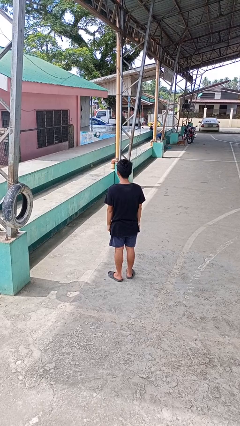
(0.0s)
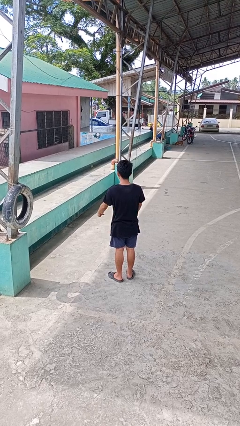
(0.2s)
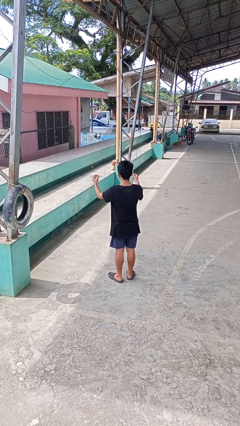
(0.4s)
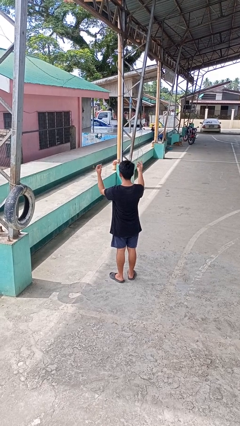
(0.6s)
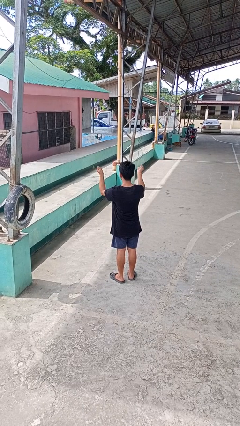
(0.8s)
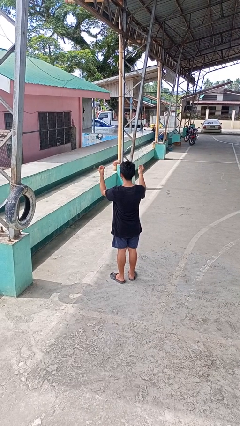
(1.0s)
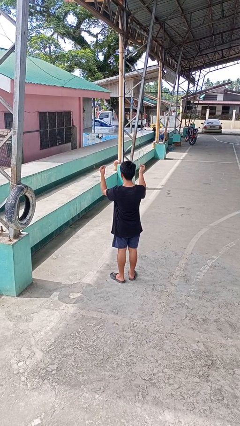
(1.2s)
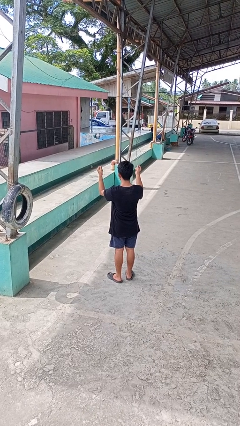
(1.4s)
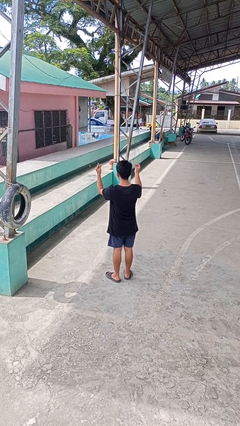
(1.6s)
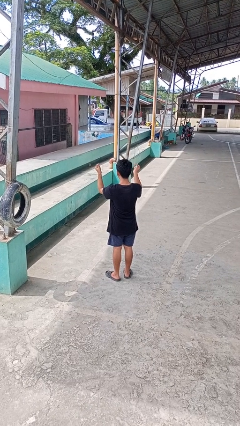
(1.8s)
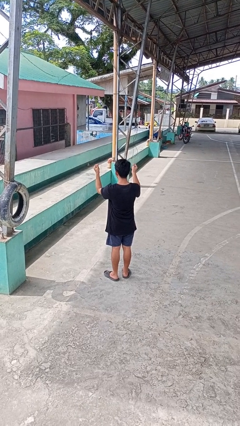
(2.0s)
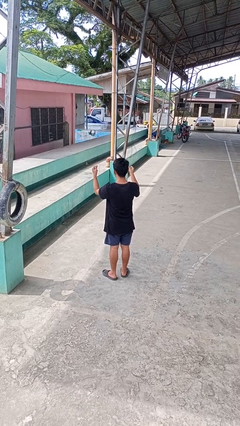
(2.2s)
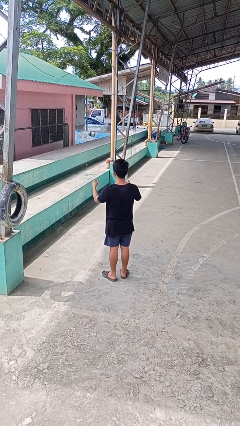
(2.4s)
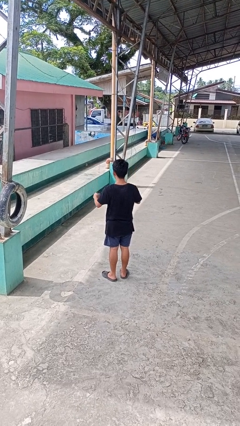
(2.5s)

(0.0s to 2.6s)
person snaps fingers

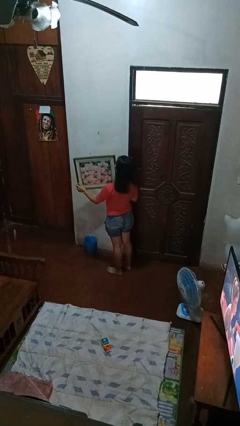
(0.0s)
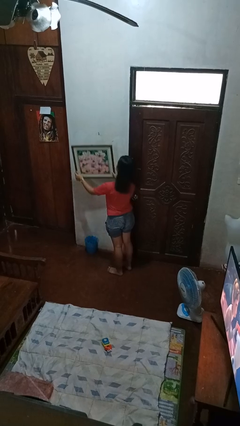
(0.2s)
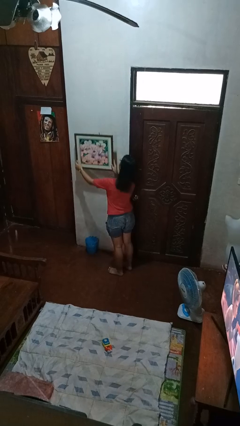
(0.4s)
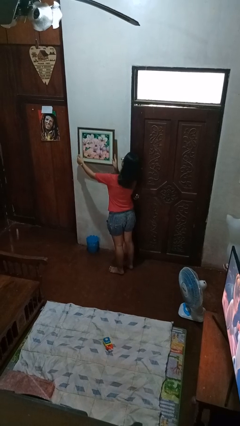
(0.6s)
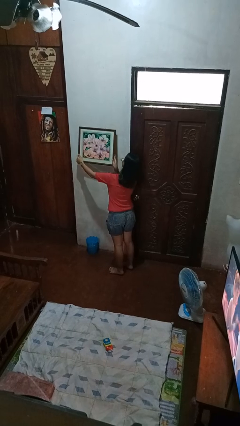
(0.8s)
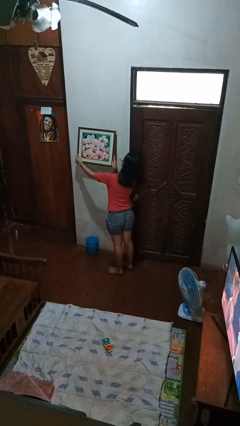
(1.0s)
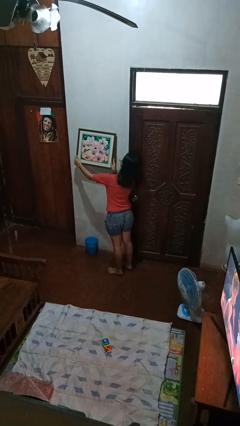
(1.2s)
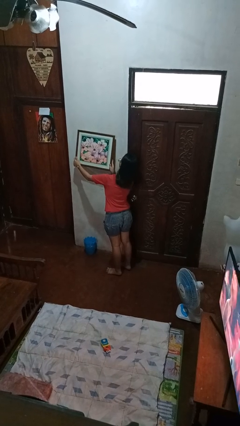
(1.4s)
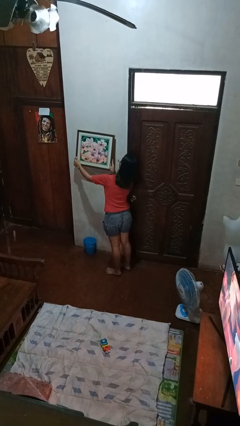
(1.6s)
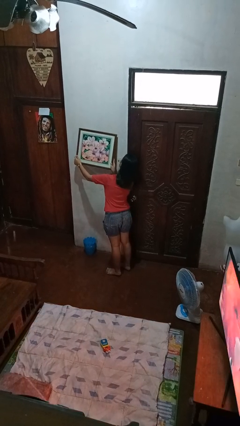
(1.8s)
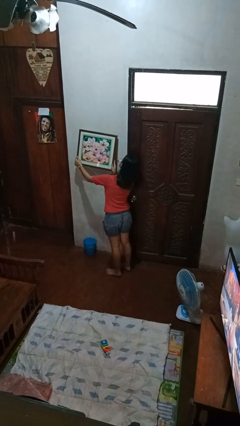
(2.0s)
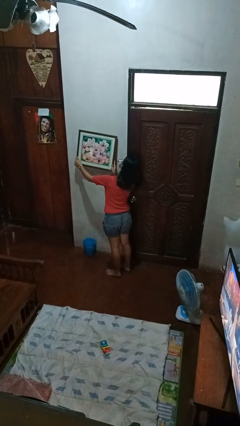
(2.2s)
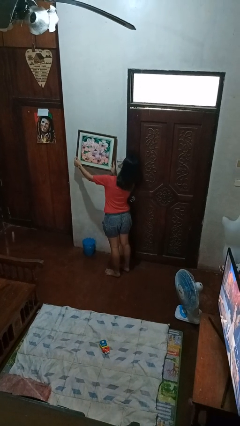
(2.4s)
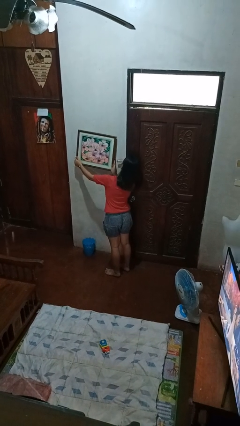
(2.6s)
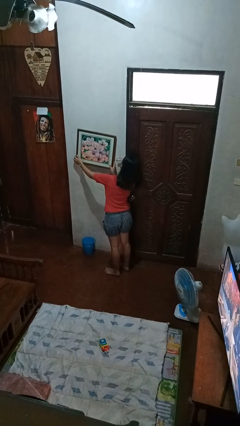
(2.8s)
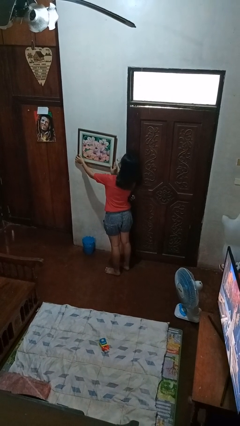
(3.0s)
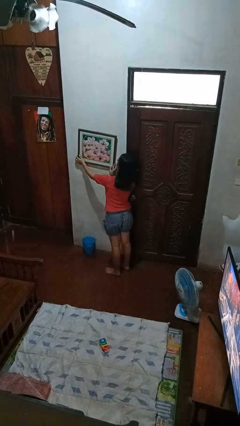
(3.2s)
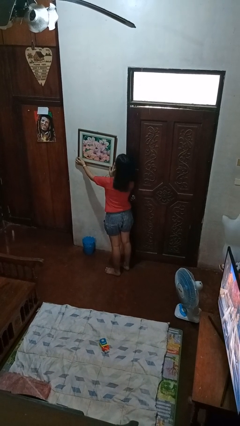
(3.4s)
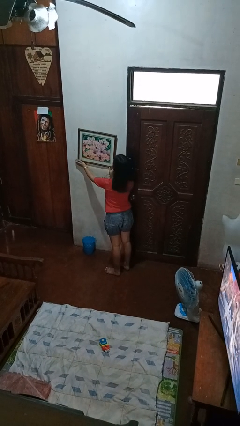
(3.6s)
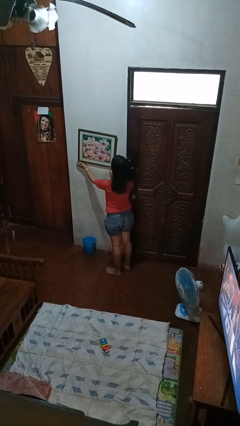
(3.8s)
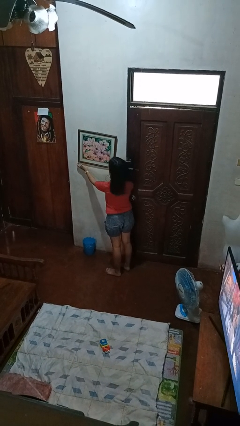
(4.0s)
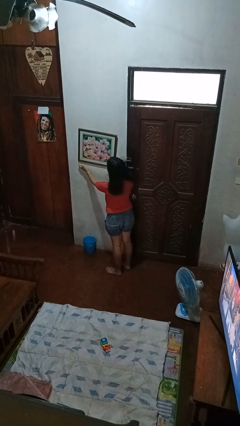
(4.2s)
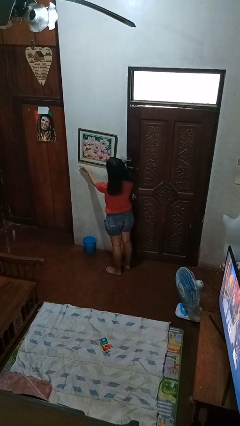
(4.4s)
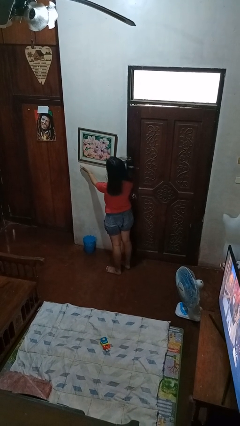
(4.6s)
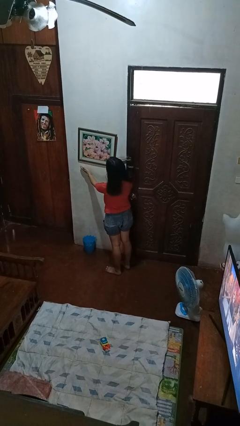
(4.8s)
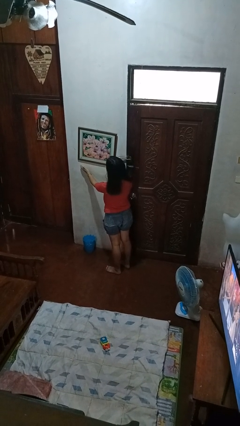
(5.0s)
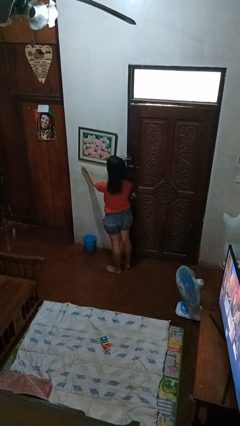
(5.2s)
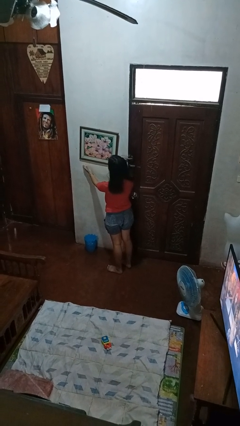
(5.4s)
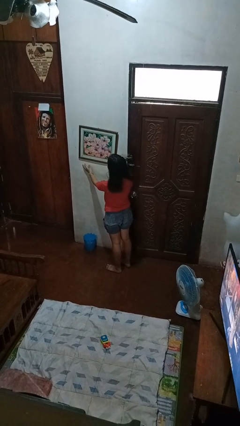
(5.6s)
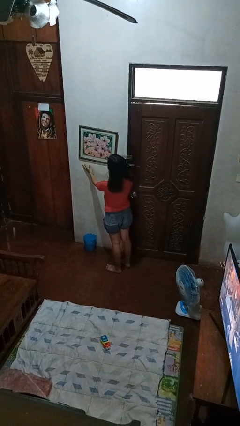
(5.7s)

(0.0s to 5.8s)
person puts up picture frame

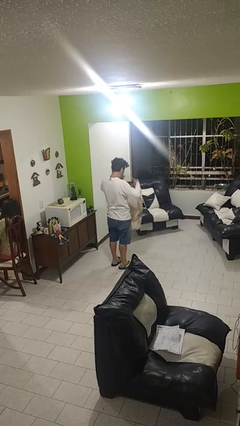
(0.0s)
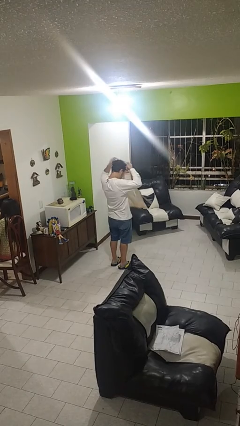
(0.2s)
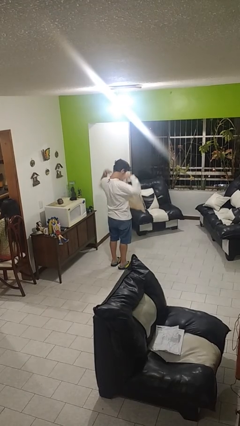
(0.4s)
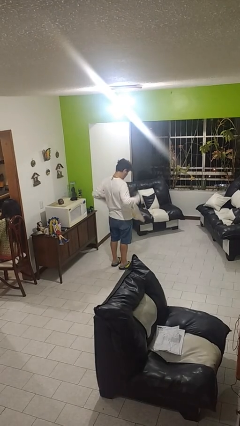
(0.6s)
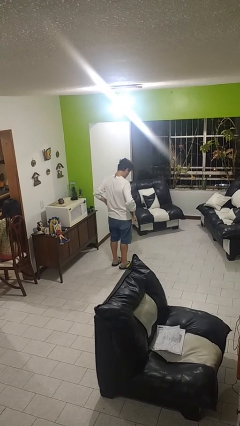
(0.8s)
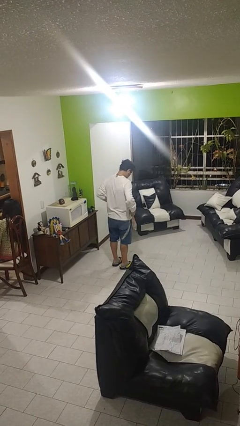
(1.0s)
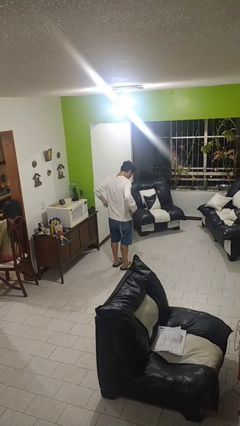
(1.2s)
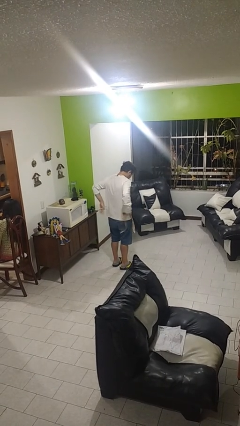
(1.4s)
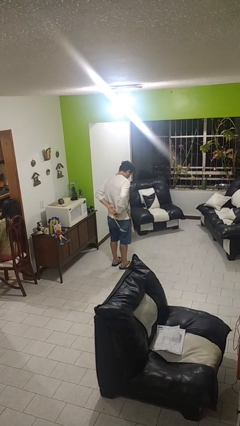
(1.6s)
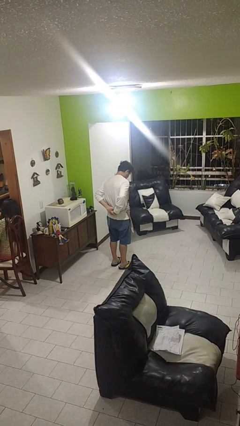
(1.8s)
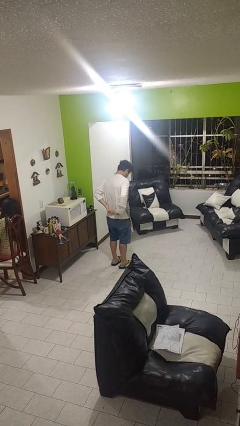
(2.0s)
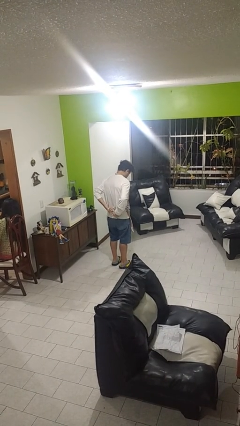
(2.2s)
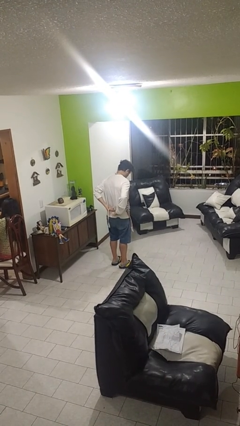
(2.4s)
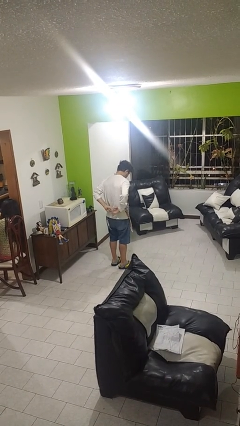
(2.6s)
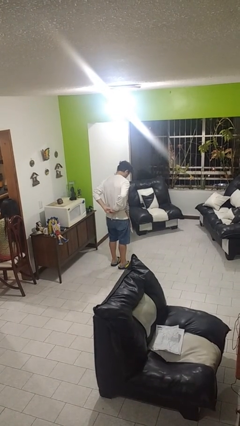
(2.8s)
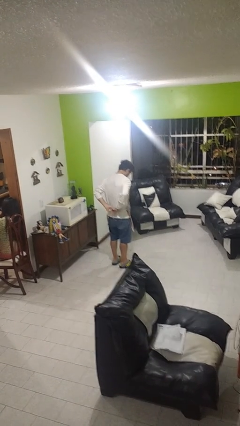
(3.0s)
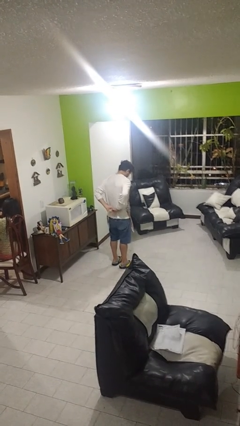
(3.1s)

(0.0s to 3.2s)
person puts on apron

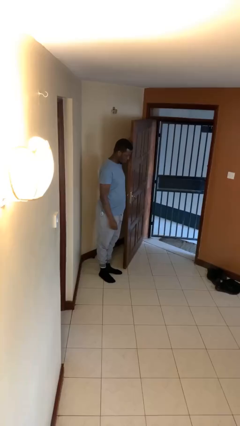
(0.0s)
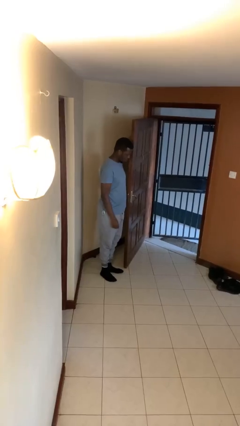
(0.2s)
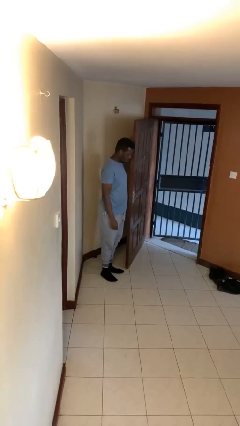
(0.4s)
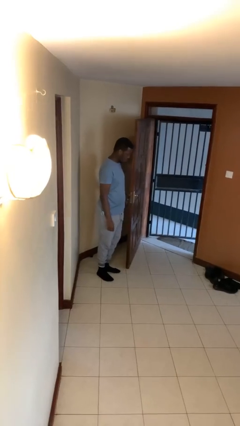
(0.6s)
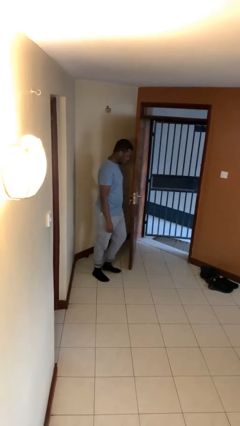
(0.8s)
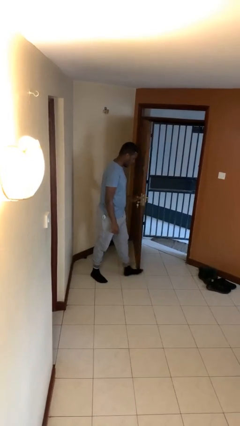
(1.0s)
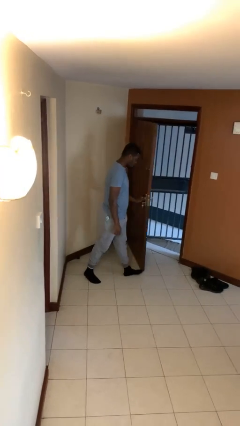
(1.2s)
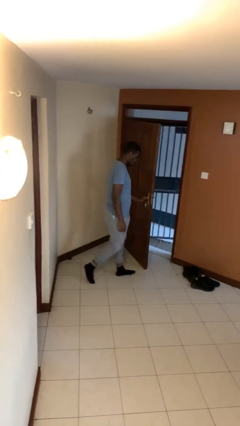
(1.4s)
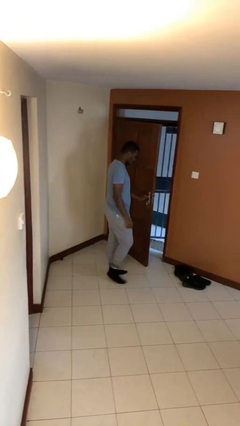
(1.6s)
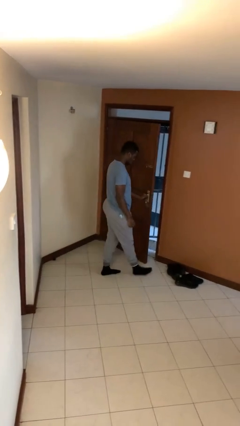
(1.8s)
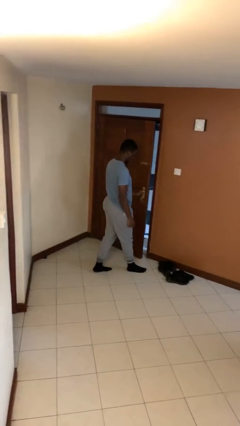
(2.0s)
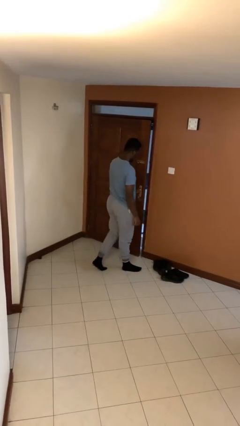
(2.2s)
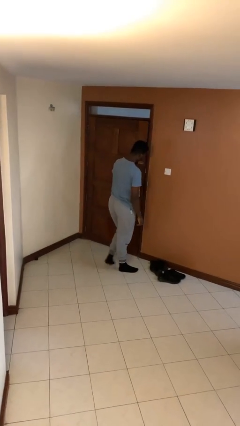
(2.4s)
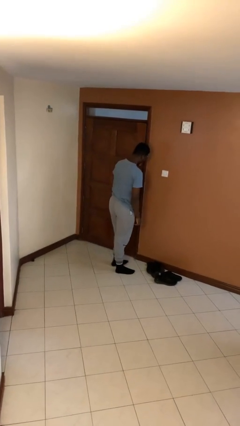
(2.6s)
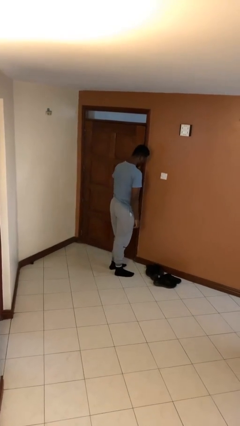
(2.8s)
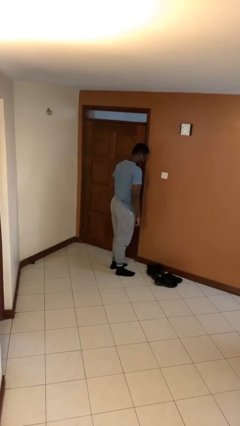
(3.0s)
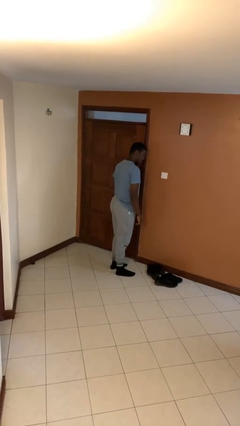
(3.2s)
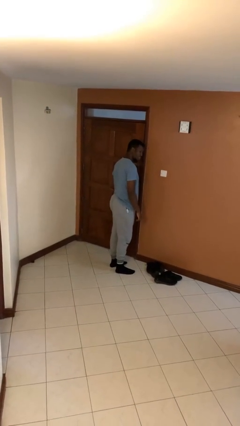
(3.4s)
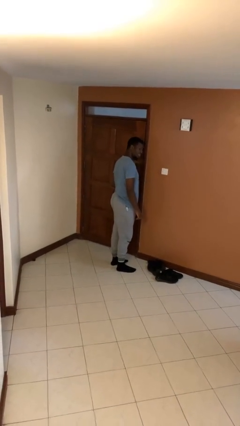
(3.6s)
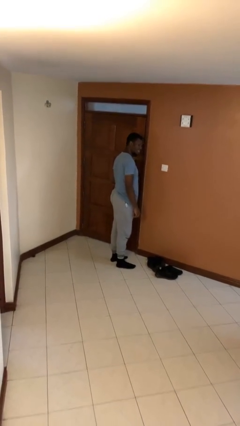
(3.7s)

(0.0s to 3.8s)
person closes facility door

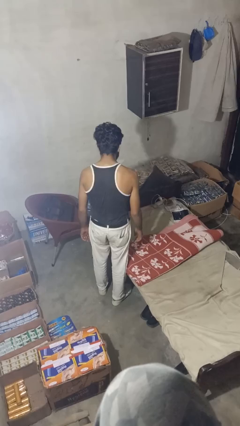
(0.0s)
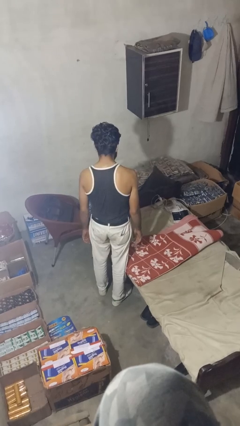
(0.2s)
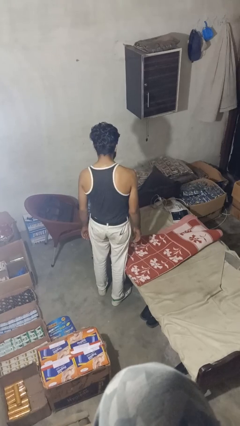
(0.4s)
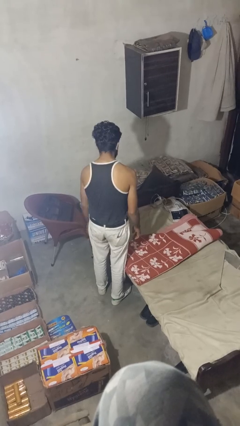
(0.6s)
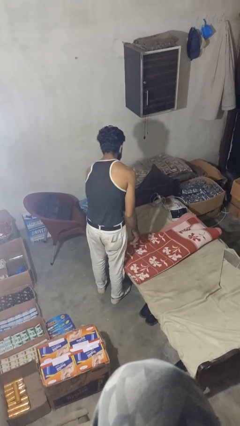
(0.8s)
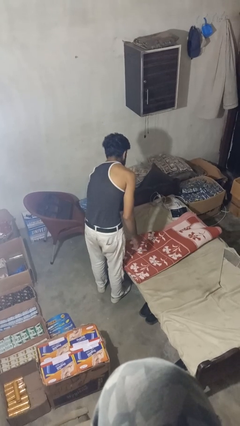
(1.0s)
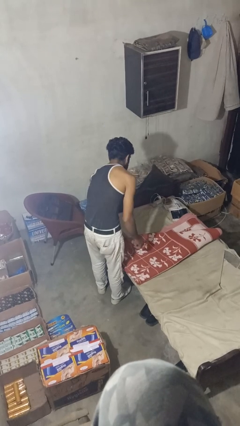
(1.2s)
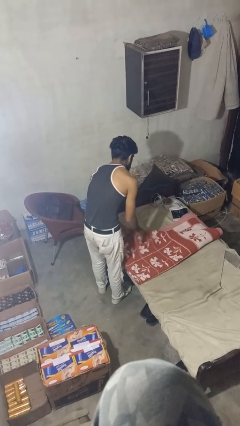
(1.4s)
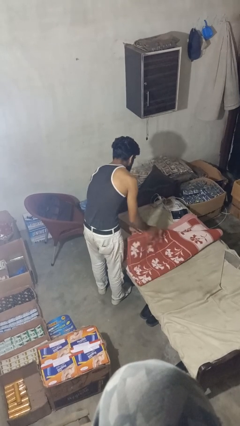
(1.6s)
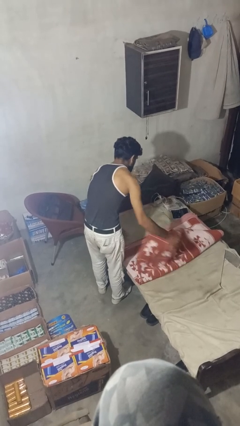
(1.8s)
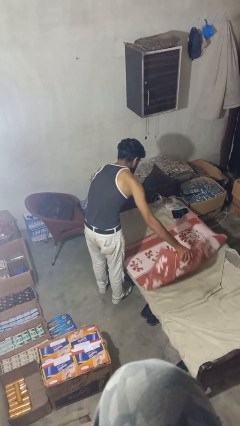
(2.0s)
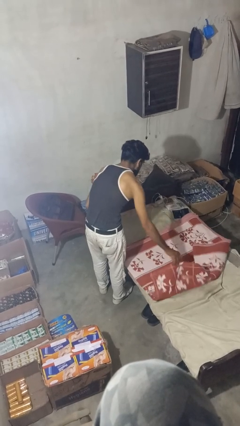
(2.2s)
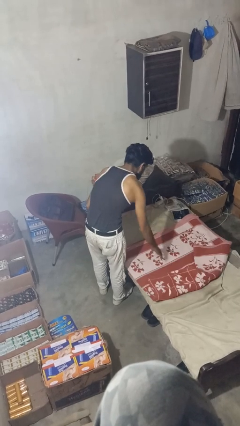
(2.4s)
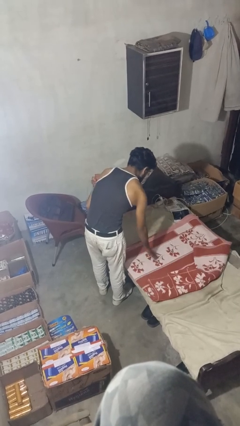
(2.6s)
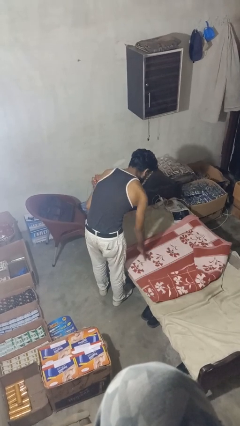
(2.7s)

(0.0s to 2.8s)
person makes bed
